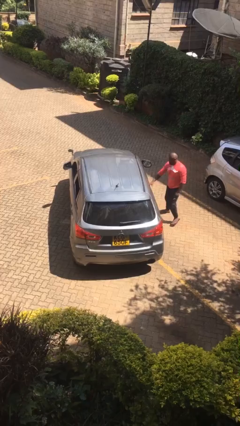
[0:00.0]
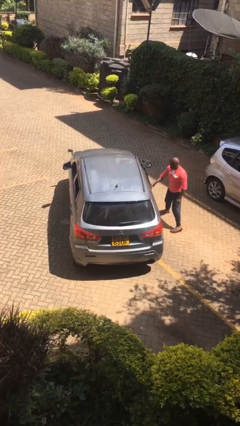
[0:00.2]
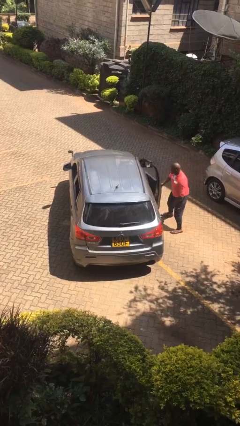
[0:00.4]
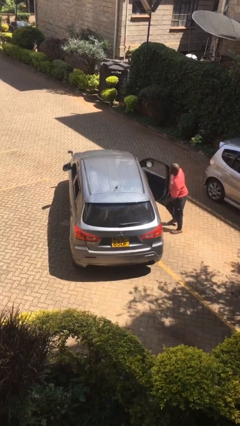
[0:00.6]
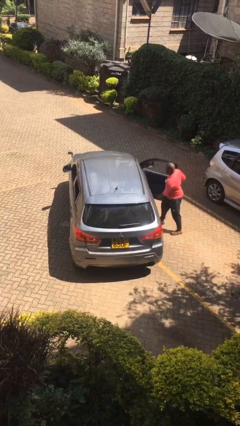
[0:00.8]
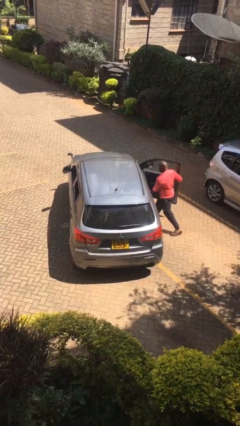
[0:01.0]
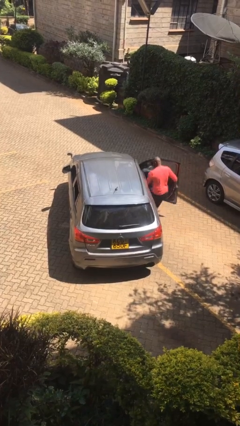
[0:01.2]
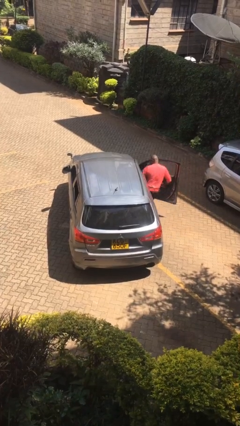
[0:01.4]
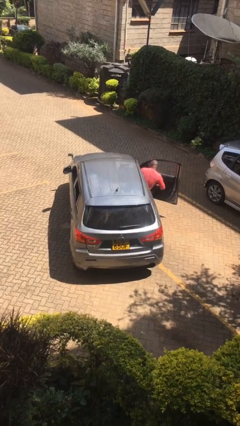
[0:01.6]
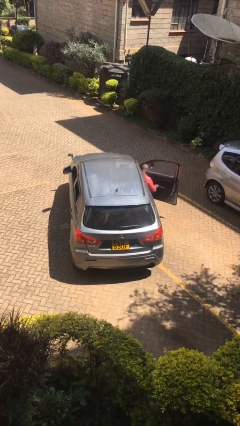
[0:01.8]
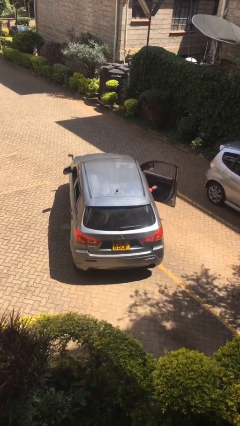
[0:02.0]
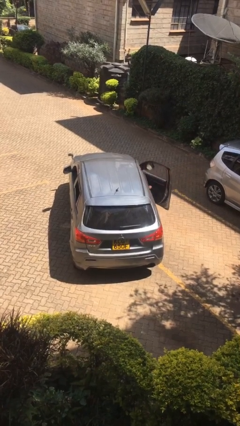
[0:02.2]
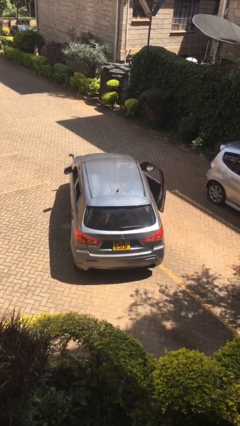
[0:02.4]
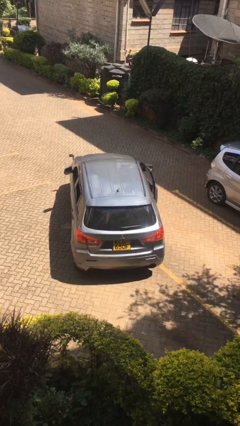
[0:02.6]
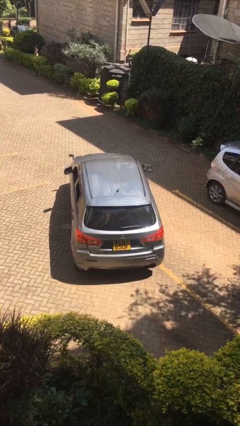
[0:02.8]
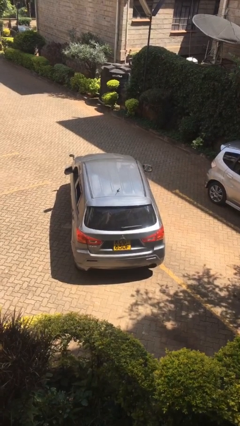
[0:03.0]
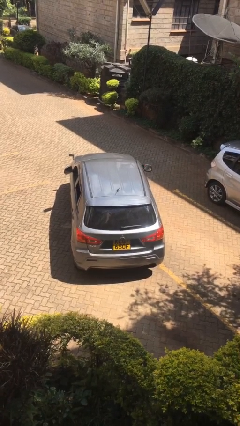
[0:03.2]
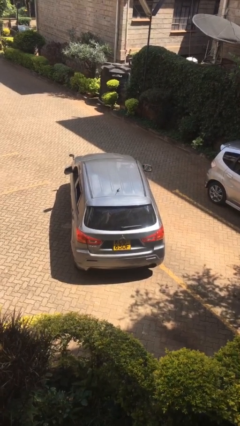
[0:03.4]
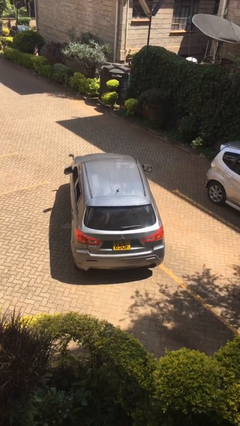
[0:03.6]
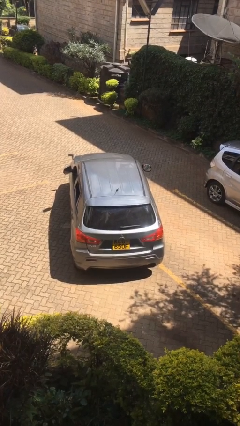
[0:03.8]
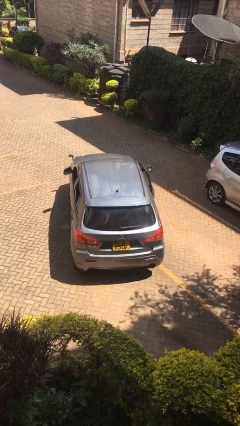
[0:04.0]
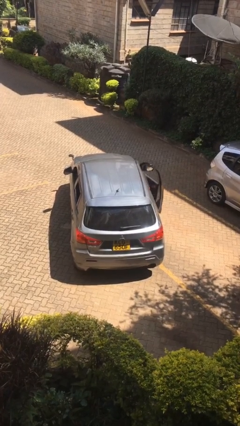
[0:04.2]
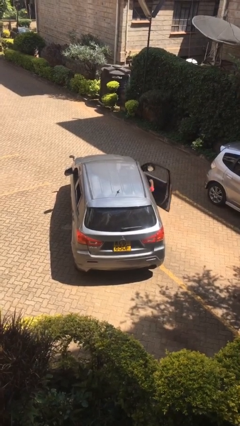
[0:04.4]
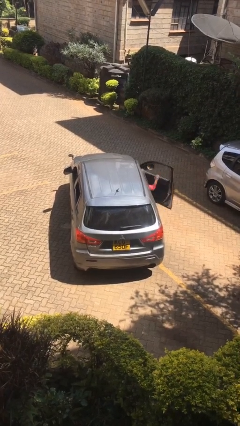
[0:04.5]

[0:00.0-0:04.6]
car picks up person

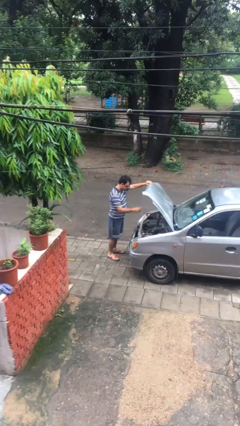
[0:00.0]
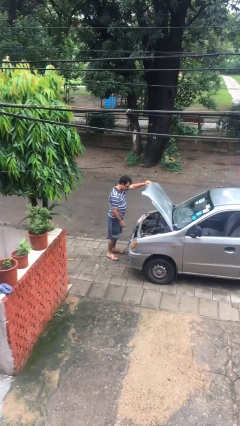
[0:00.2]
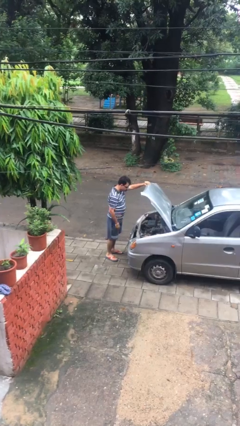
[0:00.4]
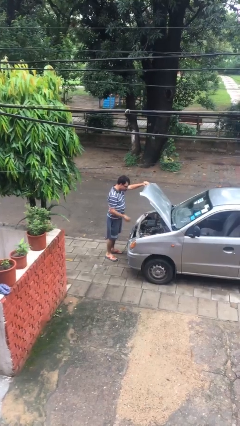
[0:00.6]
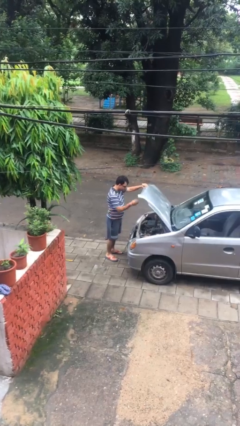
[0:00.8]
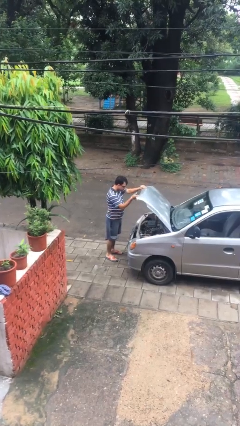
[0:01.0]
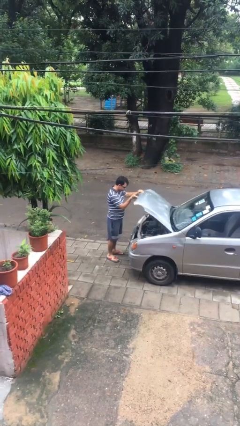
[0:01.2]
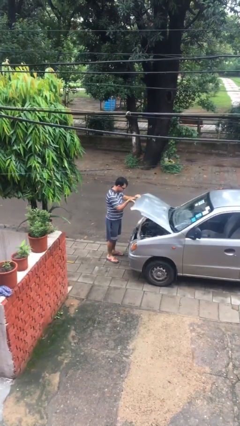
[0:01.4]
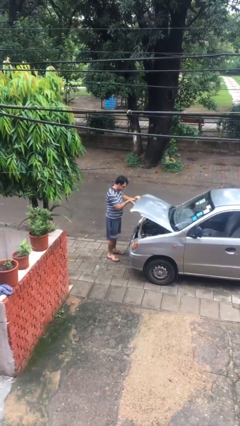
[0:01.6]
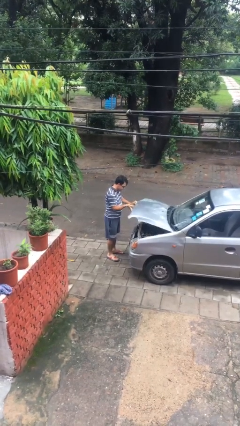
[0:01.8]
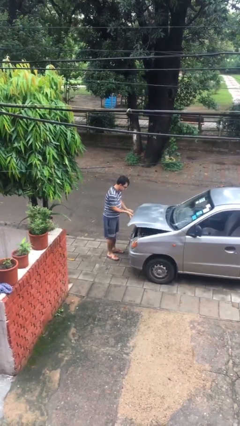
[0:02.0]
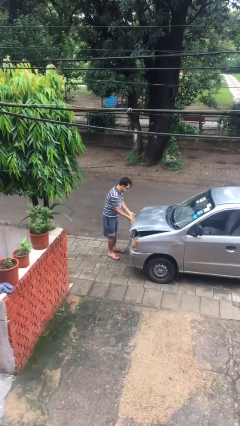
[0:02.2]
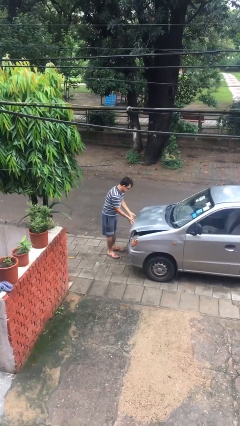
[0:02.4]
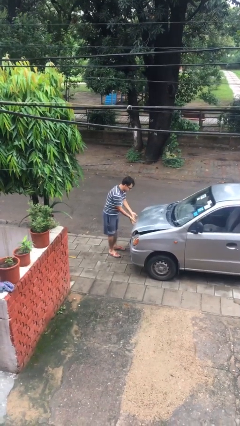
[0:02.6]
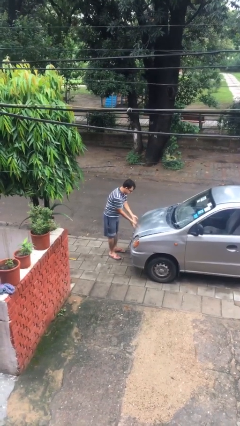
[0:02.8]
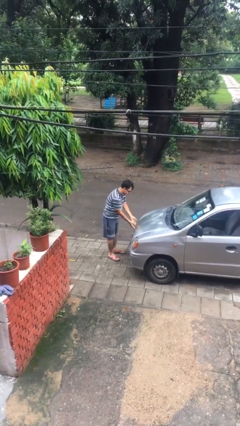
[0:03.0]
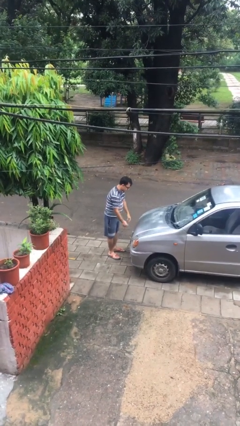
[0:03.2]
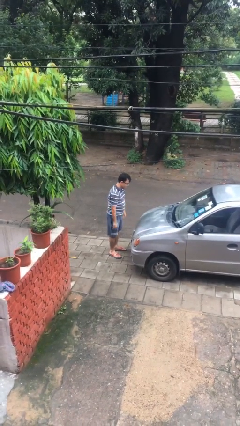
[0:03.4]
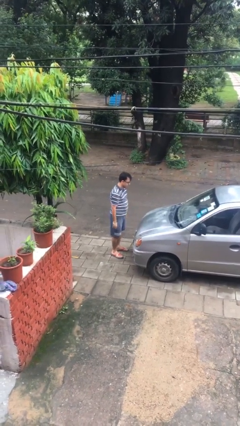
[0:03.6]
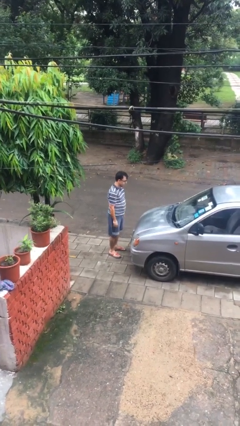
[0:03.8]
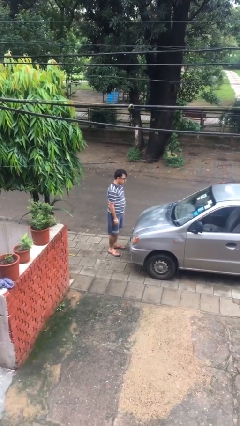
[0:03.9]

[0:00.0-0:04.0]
person closes car hood

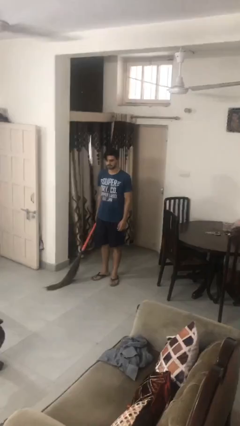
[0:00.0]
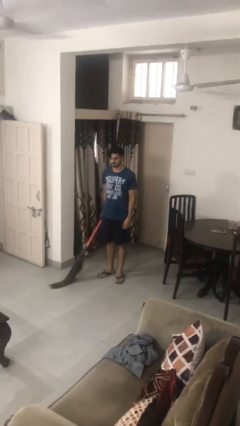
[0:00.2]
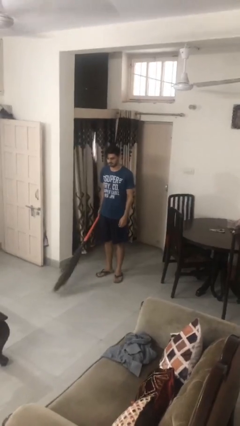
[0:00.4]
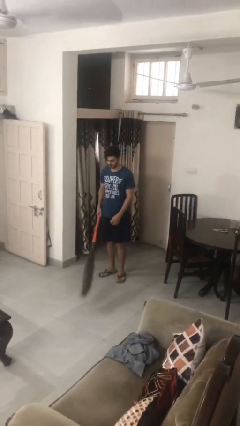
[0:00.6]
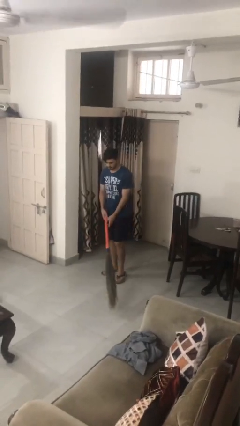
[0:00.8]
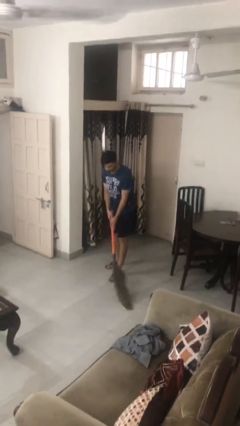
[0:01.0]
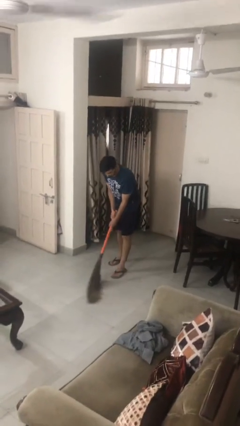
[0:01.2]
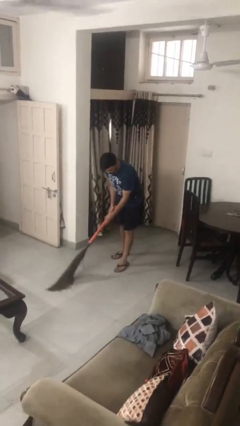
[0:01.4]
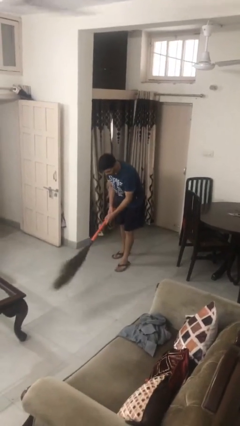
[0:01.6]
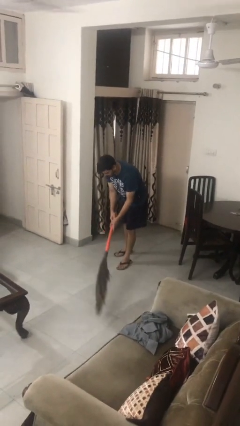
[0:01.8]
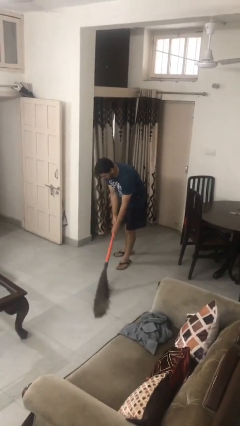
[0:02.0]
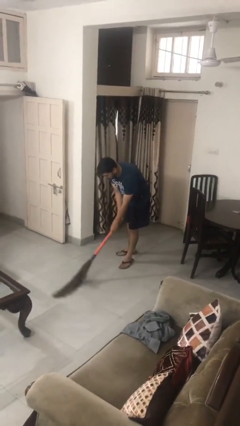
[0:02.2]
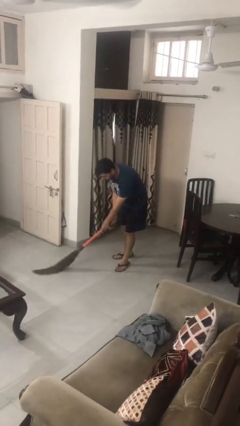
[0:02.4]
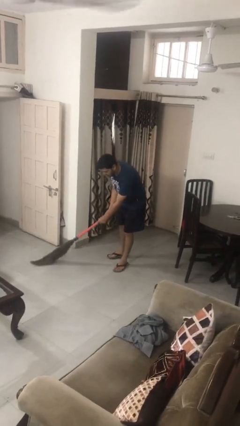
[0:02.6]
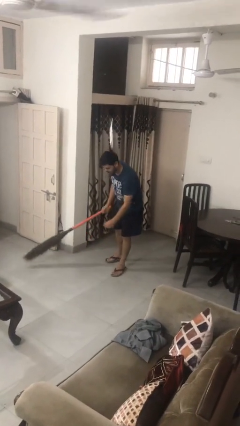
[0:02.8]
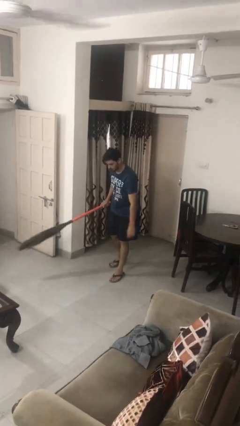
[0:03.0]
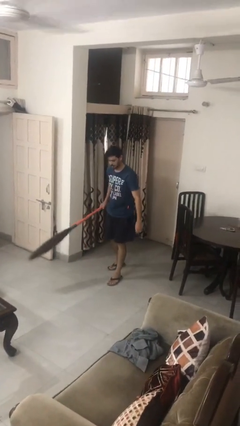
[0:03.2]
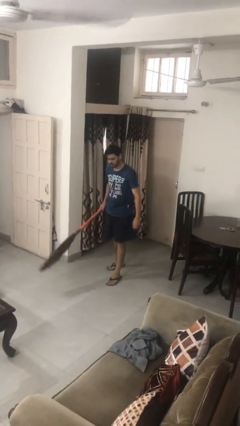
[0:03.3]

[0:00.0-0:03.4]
person sweeps floor

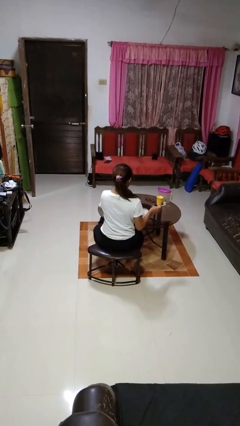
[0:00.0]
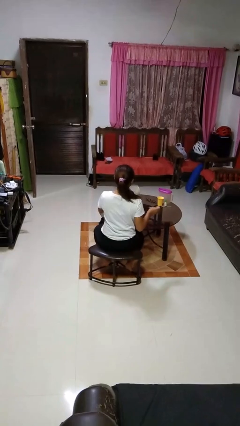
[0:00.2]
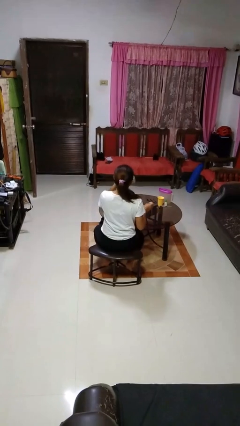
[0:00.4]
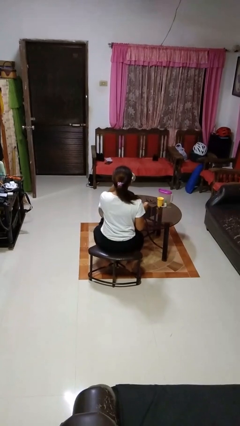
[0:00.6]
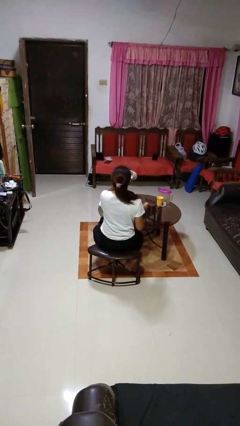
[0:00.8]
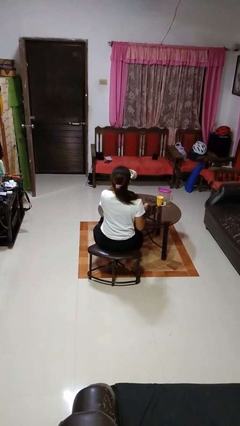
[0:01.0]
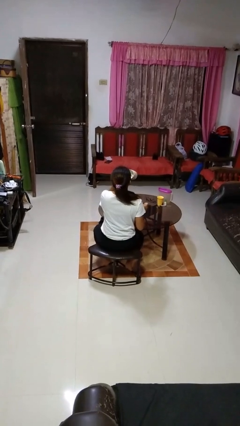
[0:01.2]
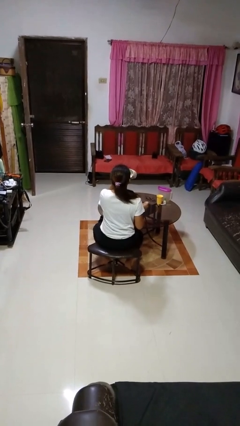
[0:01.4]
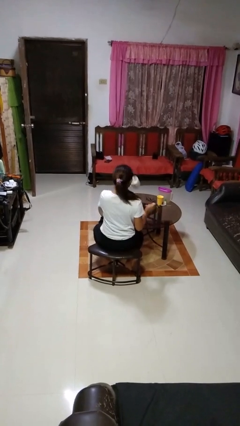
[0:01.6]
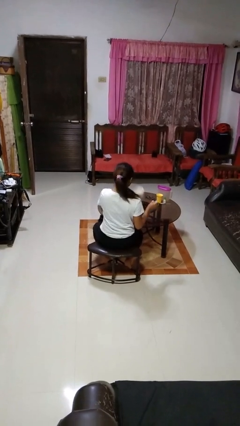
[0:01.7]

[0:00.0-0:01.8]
person drinks from mug

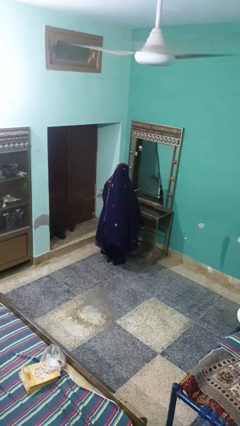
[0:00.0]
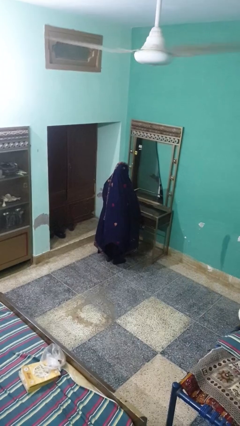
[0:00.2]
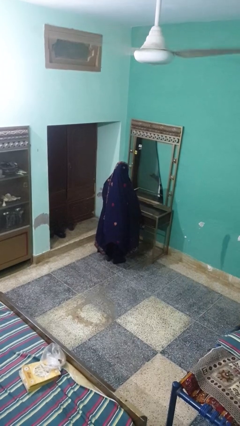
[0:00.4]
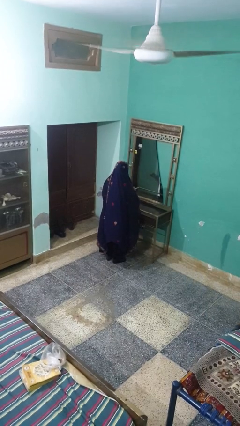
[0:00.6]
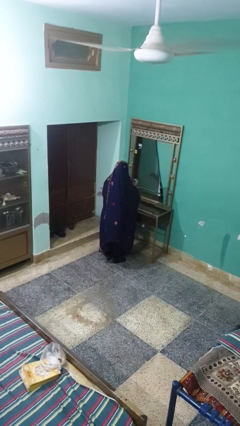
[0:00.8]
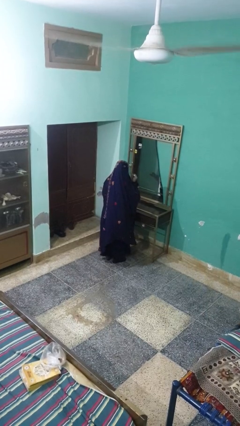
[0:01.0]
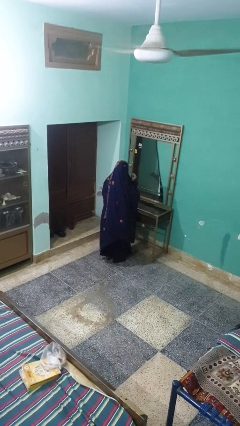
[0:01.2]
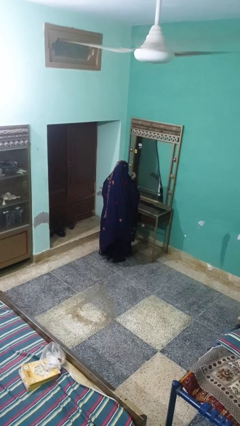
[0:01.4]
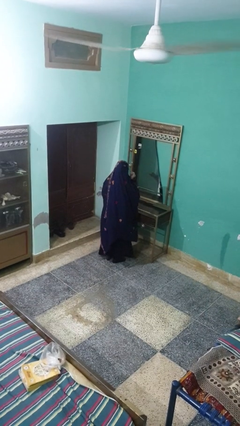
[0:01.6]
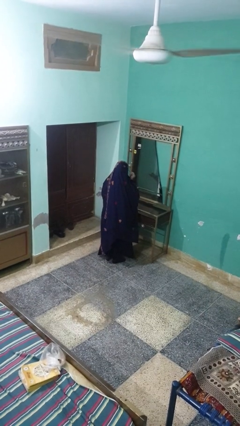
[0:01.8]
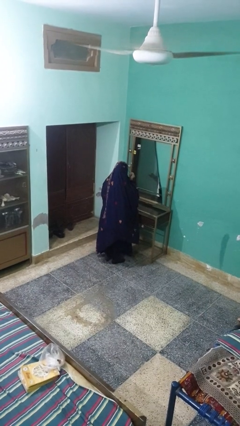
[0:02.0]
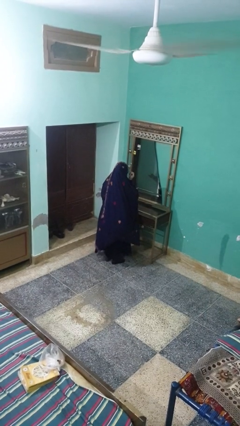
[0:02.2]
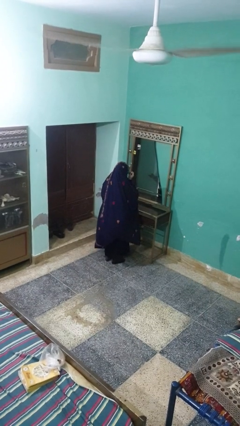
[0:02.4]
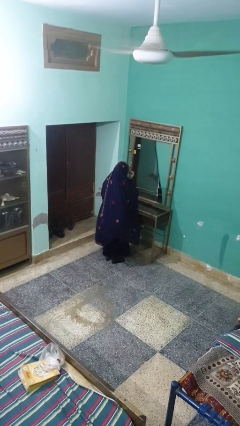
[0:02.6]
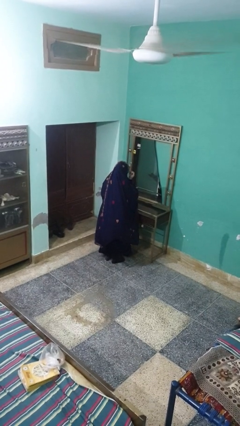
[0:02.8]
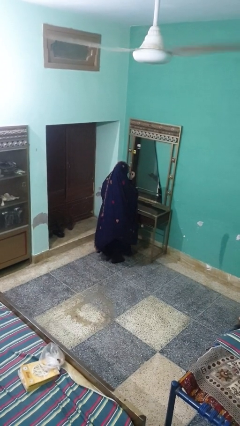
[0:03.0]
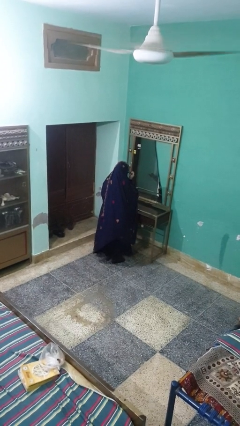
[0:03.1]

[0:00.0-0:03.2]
person applies eye makeup

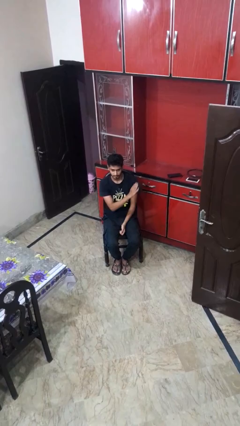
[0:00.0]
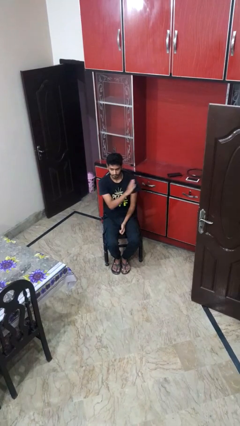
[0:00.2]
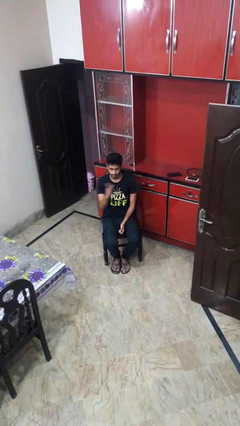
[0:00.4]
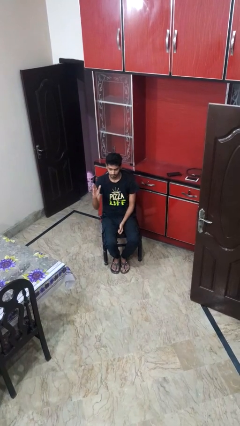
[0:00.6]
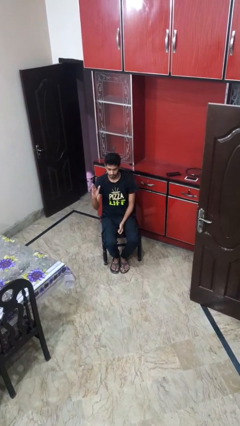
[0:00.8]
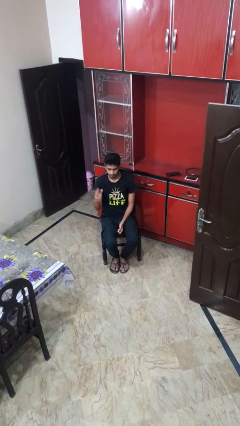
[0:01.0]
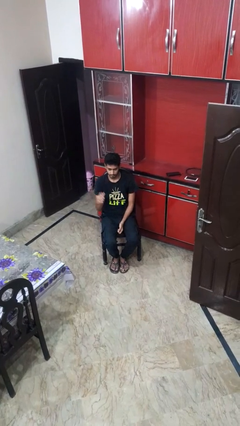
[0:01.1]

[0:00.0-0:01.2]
person gestures swipe right
